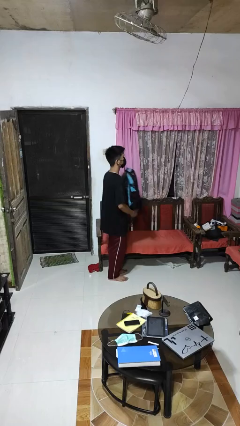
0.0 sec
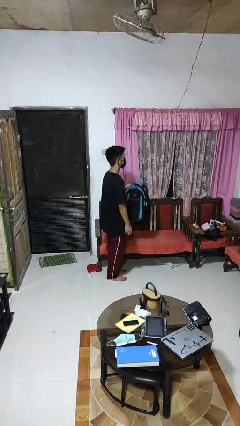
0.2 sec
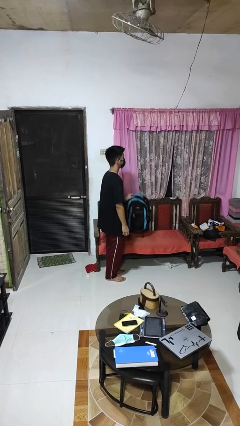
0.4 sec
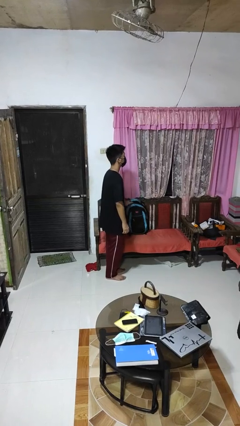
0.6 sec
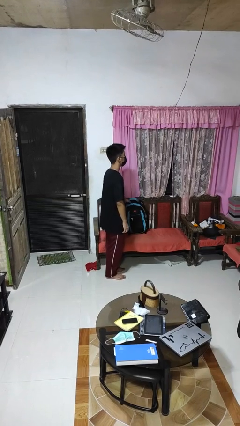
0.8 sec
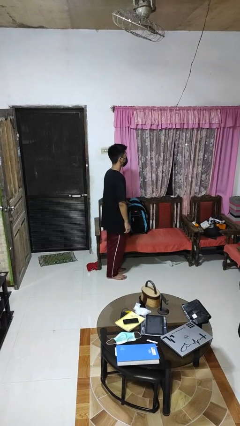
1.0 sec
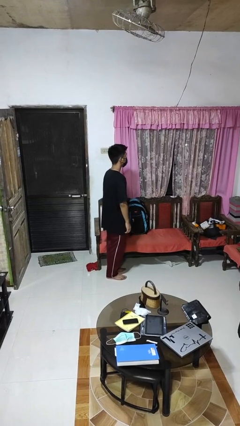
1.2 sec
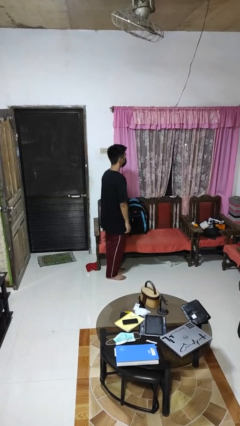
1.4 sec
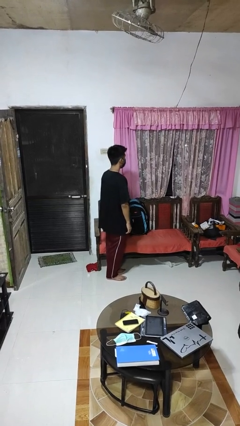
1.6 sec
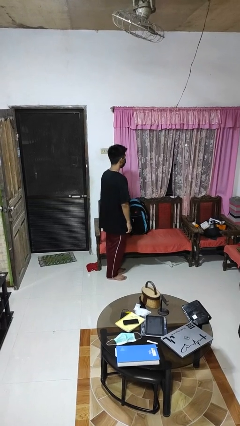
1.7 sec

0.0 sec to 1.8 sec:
person puts down object on couch

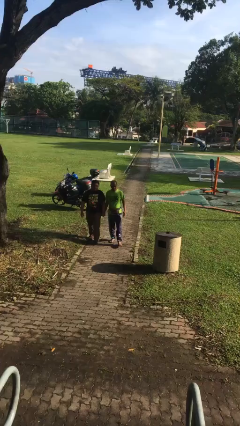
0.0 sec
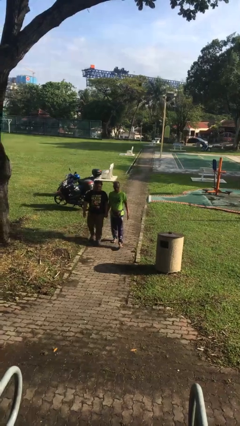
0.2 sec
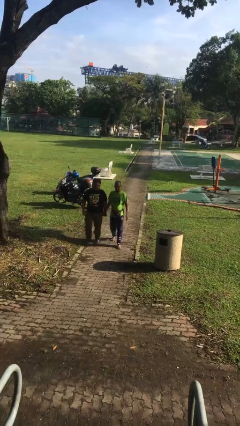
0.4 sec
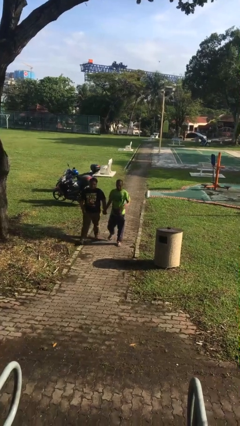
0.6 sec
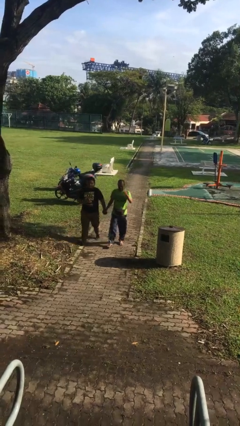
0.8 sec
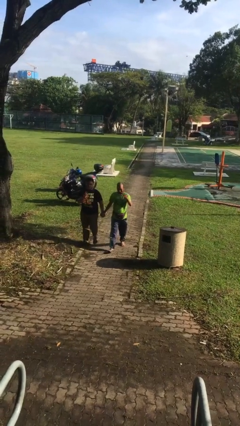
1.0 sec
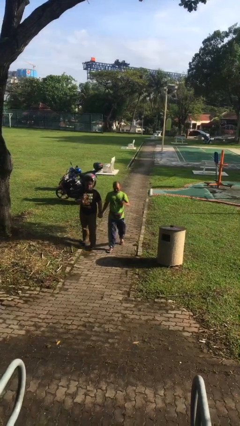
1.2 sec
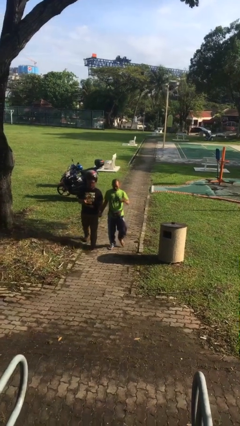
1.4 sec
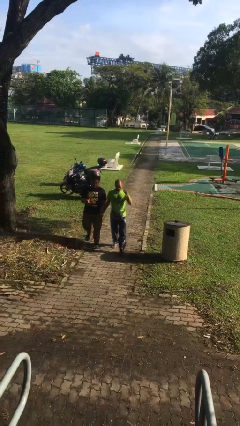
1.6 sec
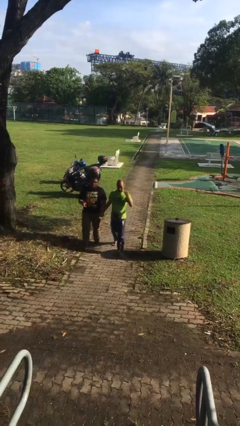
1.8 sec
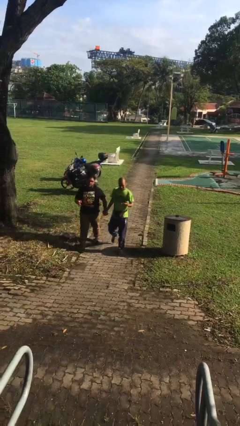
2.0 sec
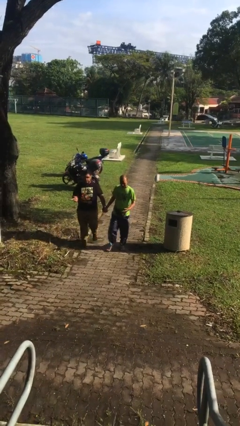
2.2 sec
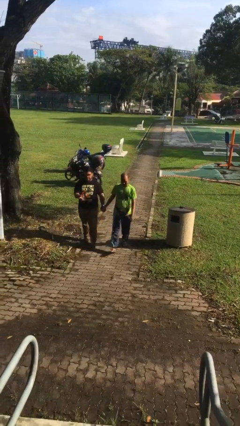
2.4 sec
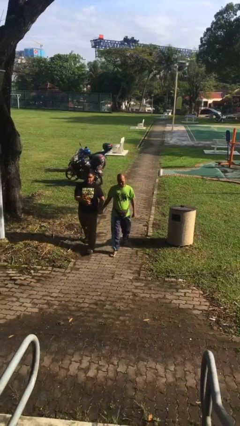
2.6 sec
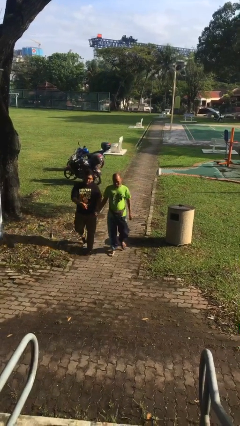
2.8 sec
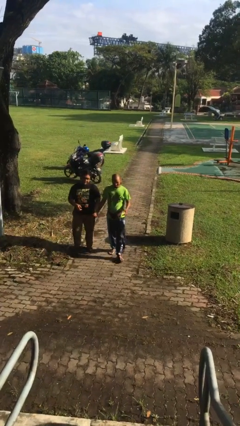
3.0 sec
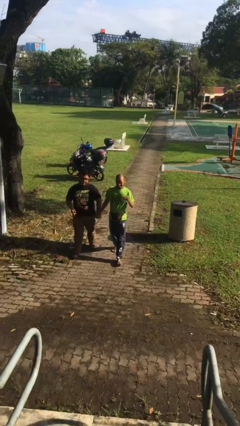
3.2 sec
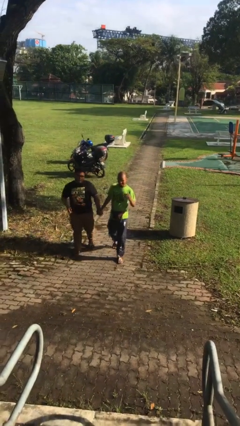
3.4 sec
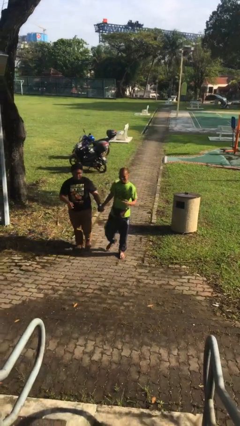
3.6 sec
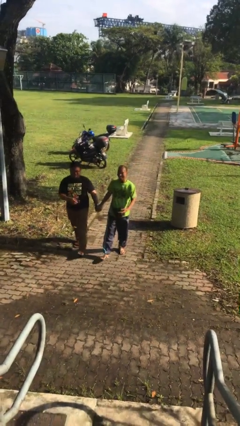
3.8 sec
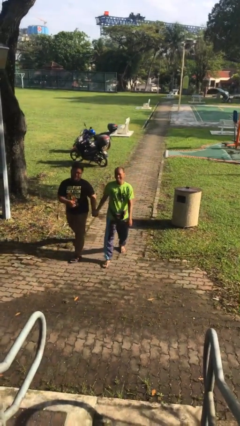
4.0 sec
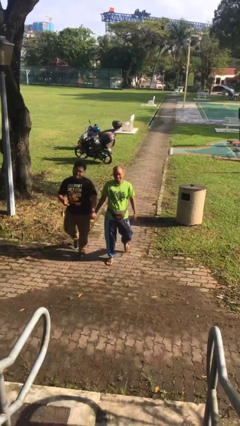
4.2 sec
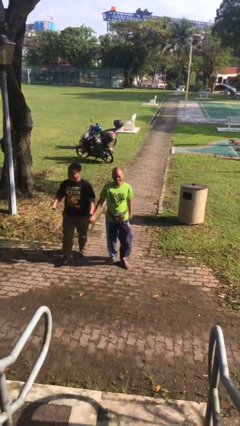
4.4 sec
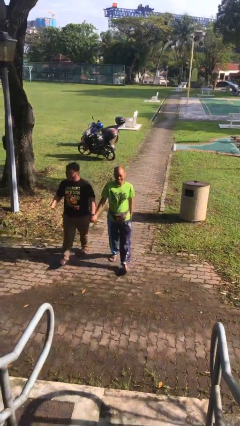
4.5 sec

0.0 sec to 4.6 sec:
person holds hand

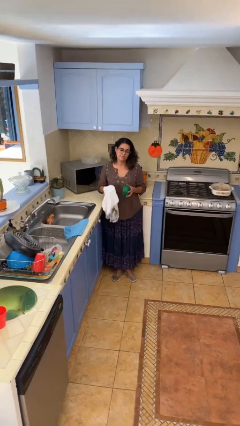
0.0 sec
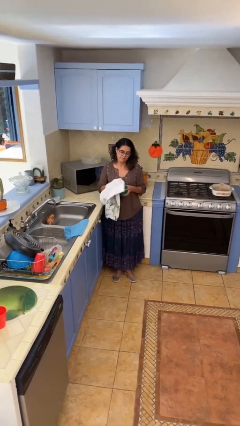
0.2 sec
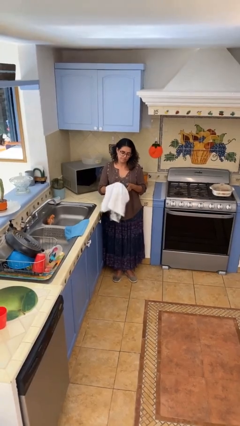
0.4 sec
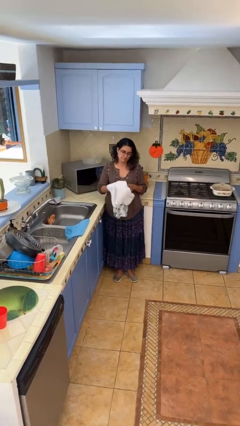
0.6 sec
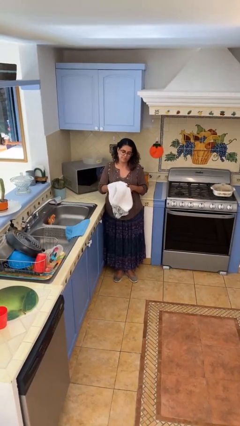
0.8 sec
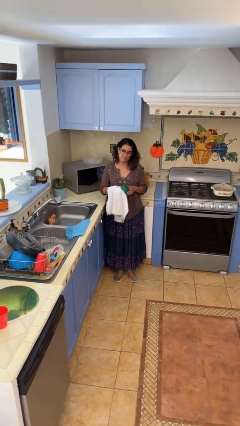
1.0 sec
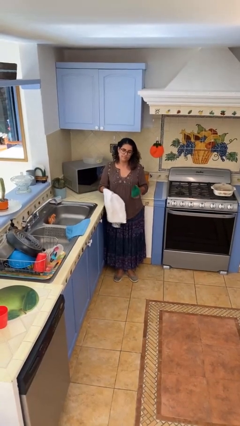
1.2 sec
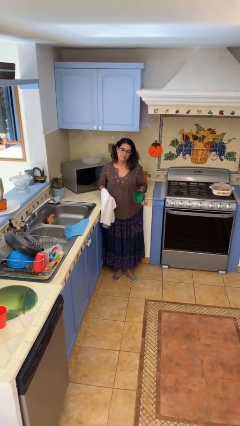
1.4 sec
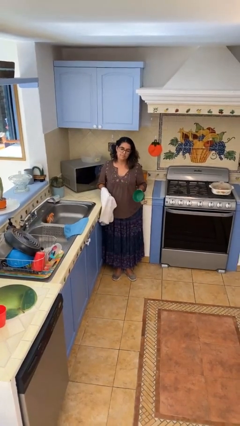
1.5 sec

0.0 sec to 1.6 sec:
person dries dish

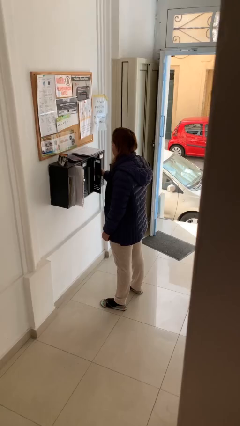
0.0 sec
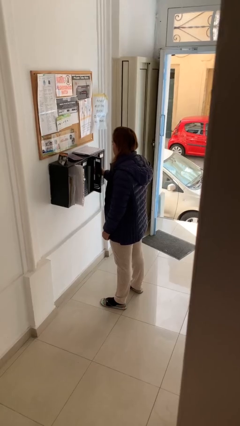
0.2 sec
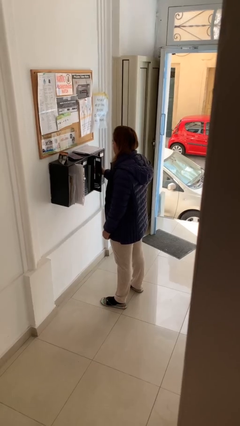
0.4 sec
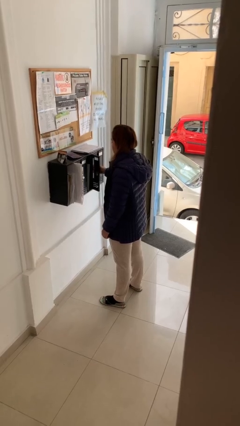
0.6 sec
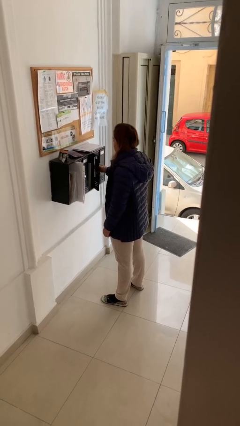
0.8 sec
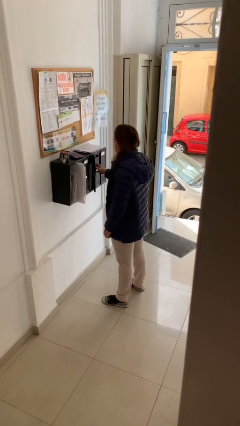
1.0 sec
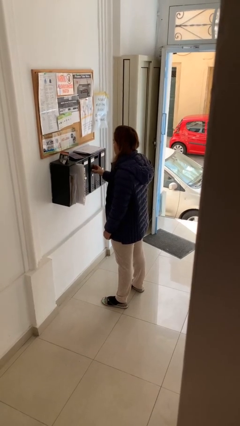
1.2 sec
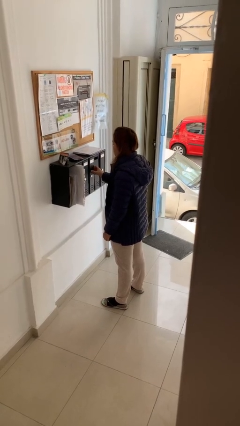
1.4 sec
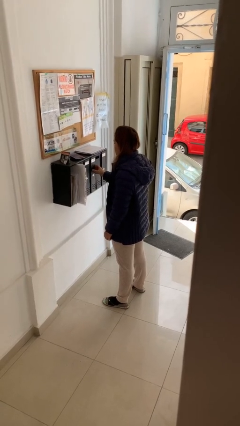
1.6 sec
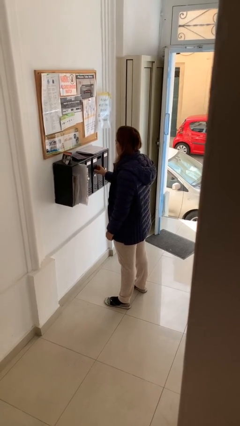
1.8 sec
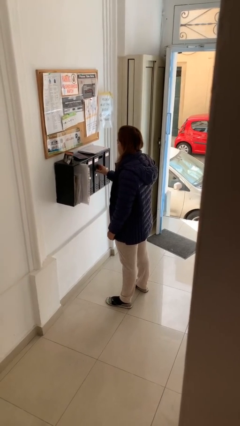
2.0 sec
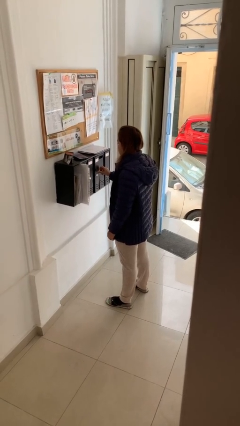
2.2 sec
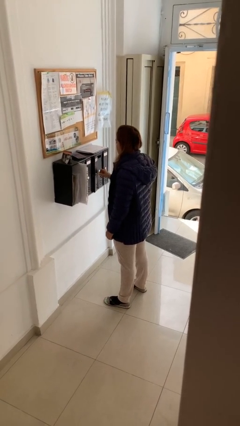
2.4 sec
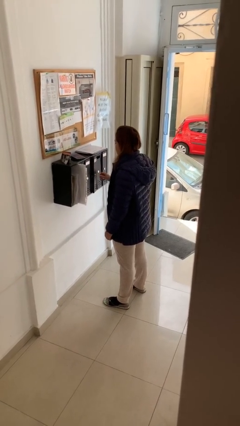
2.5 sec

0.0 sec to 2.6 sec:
person closes mailbox

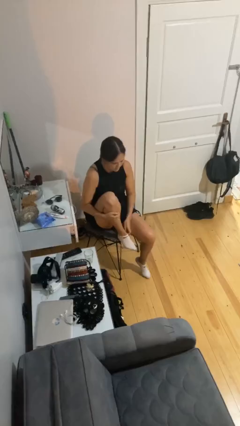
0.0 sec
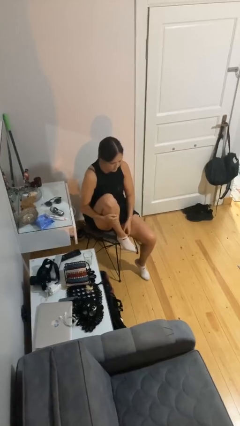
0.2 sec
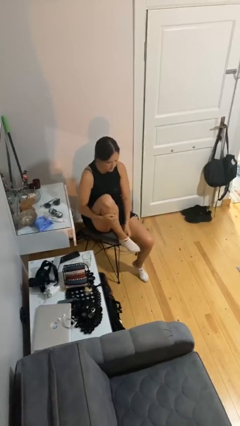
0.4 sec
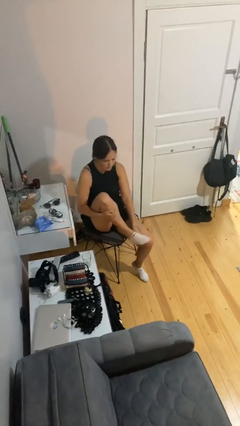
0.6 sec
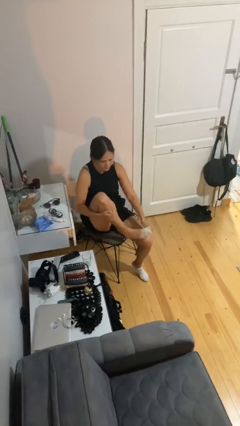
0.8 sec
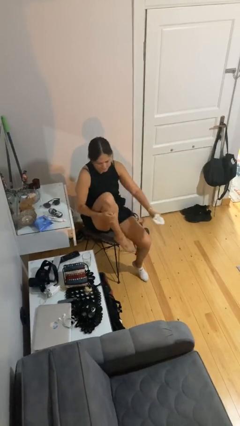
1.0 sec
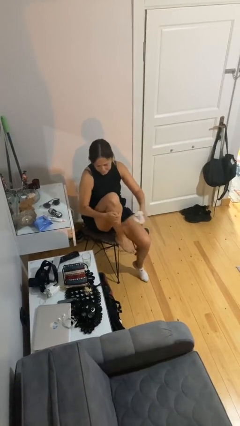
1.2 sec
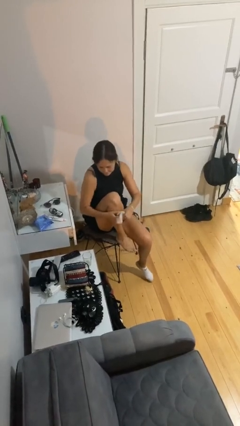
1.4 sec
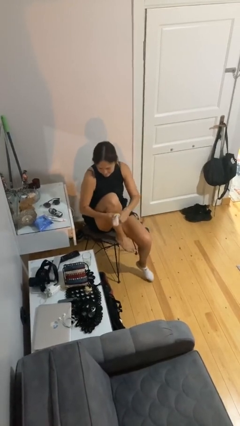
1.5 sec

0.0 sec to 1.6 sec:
person takes off socks

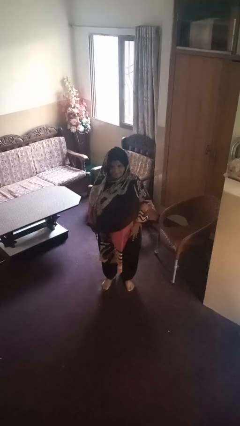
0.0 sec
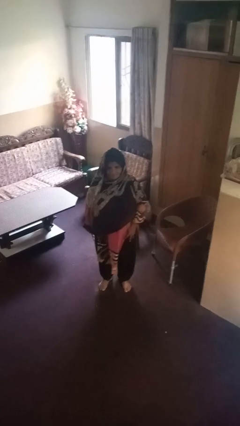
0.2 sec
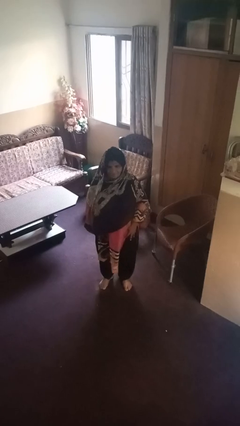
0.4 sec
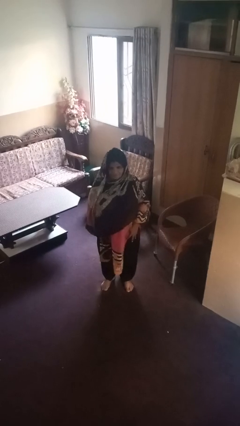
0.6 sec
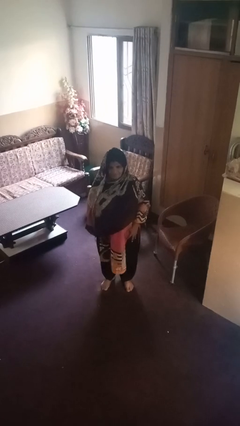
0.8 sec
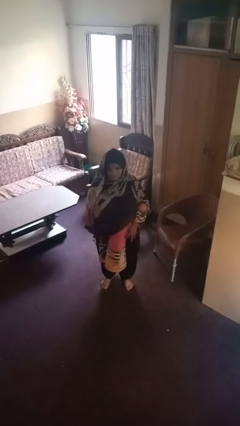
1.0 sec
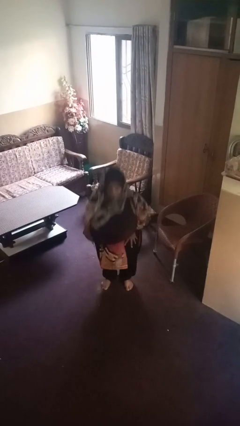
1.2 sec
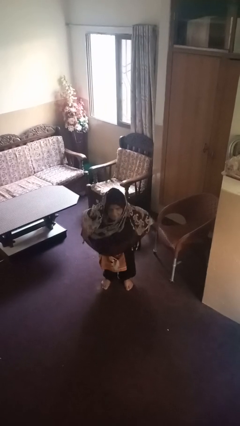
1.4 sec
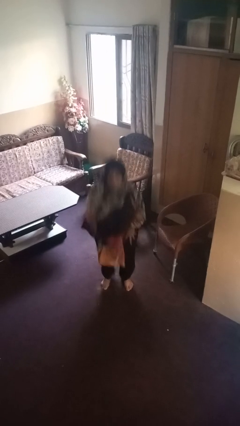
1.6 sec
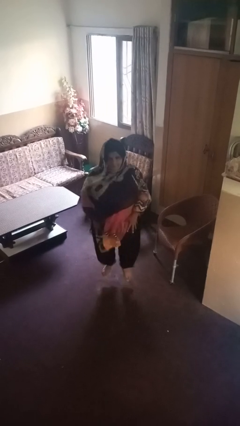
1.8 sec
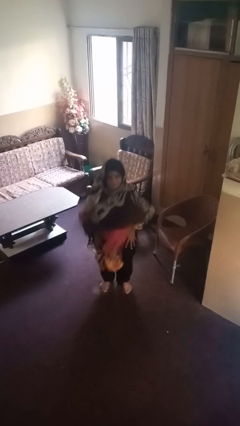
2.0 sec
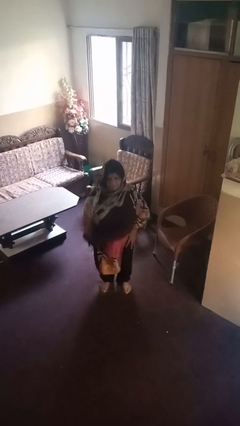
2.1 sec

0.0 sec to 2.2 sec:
person jumps

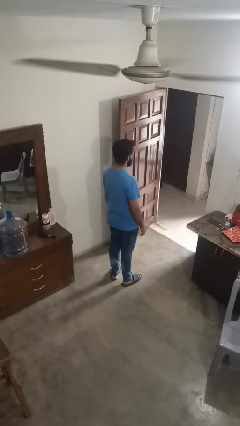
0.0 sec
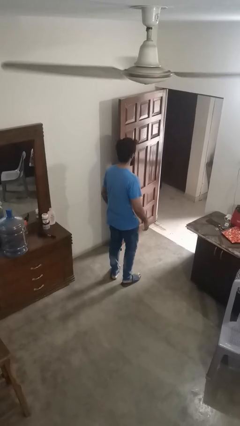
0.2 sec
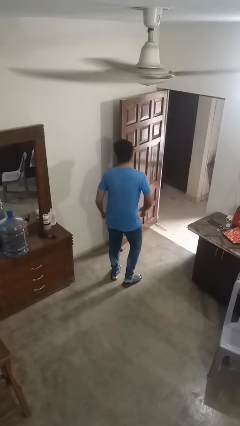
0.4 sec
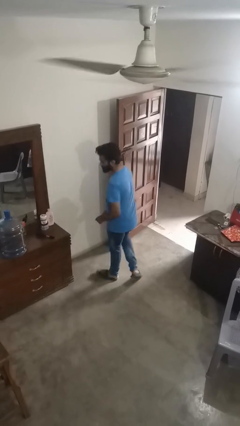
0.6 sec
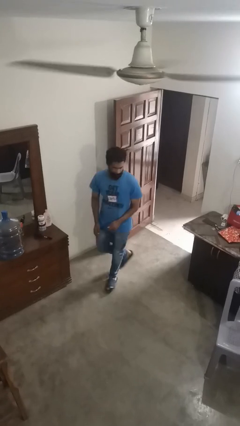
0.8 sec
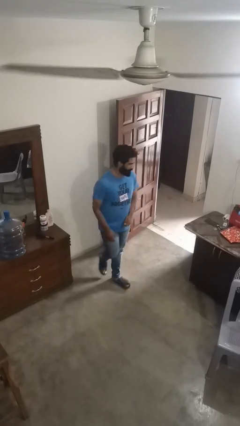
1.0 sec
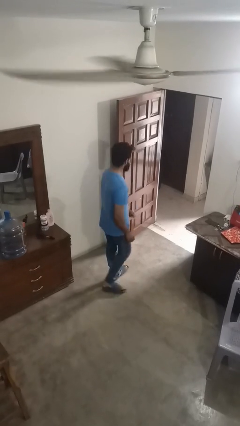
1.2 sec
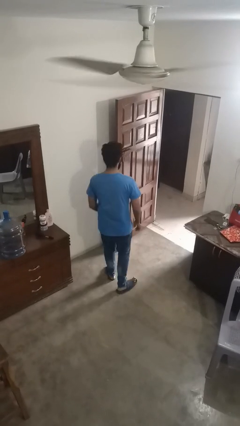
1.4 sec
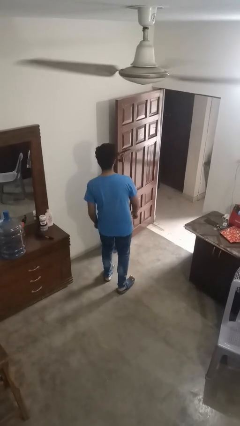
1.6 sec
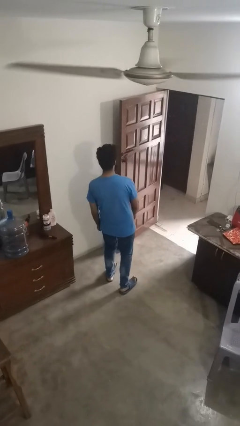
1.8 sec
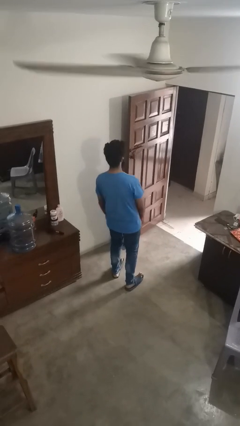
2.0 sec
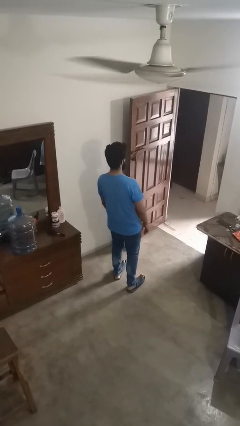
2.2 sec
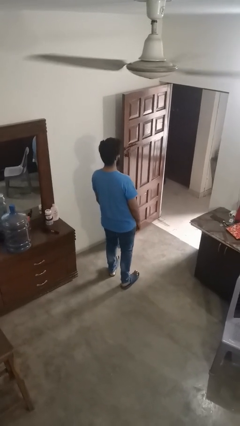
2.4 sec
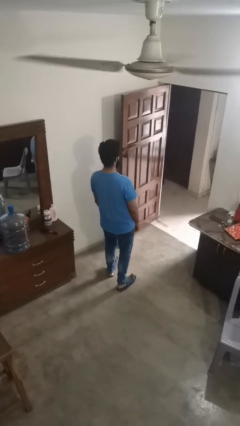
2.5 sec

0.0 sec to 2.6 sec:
person twirls

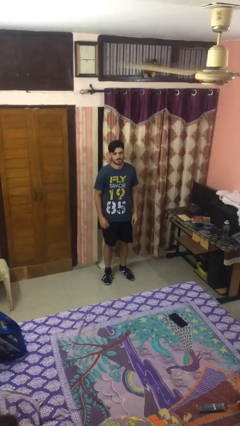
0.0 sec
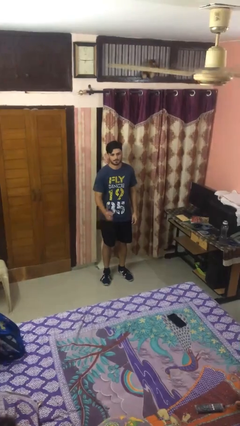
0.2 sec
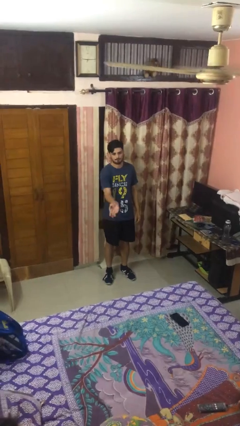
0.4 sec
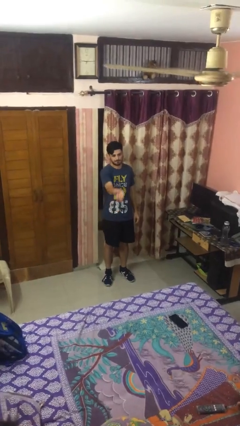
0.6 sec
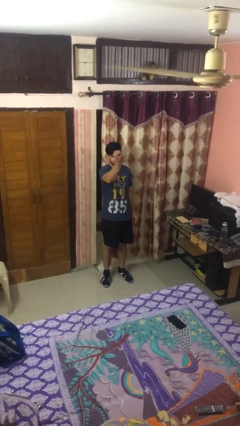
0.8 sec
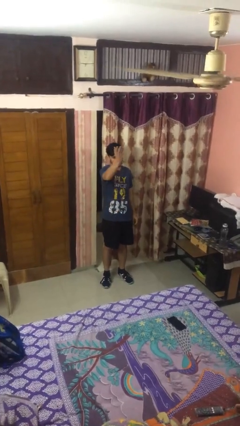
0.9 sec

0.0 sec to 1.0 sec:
person gestures swipe up
